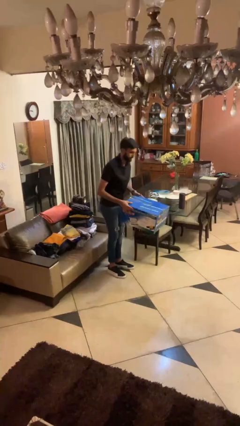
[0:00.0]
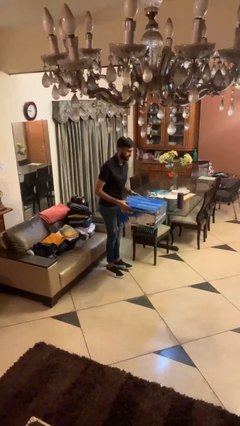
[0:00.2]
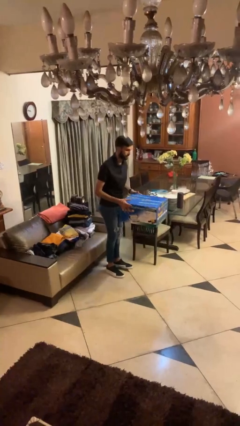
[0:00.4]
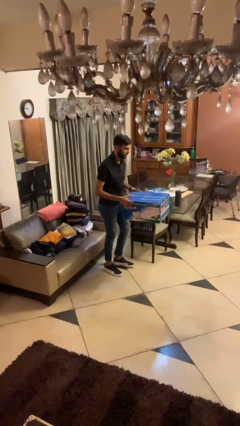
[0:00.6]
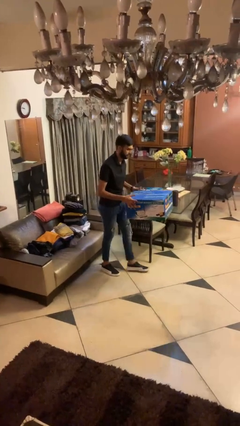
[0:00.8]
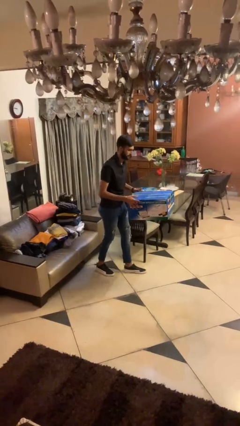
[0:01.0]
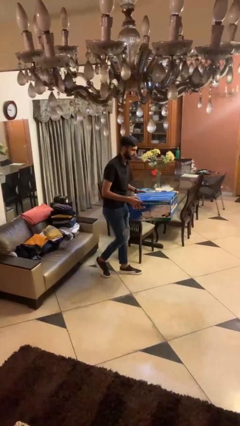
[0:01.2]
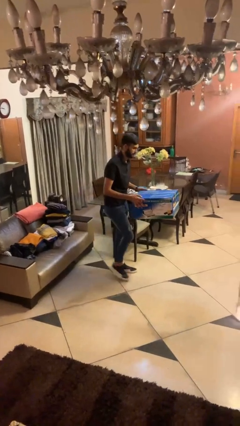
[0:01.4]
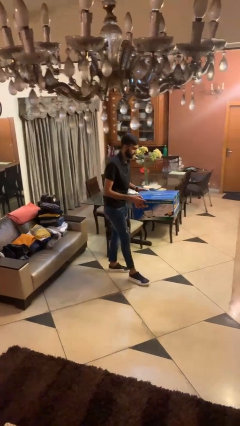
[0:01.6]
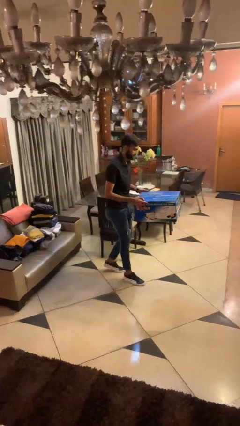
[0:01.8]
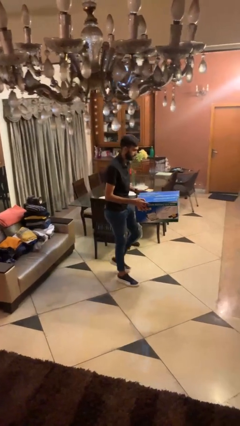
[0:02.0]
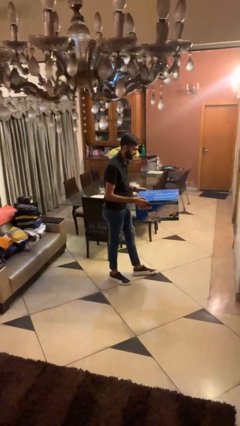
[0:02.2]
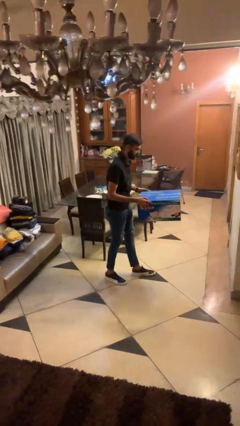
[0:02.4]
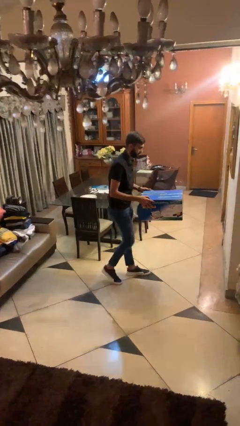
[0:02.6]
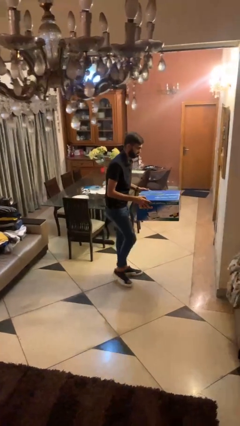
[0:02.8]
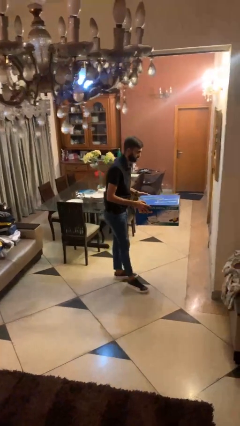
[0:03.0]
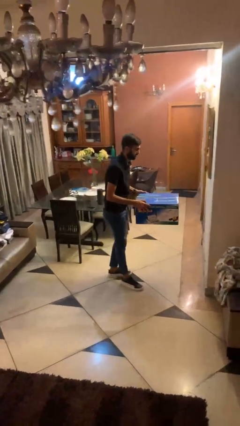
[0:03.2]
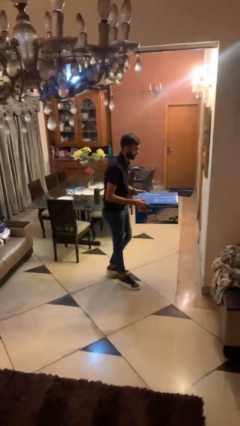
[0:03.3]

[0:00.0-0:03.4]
person carries heavy object

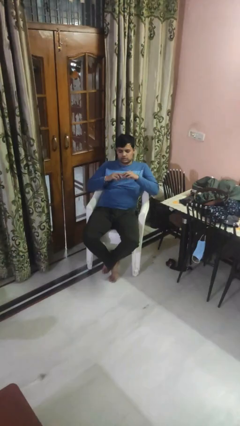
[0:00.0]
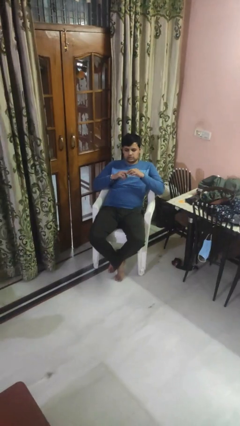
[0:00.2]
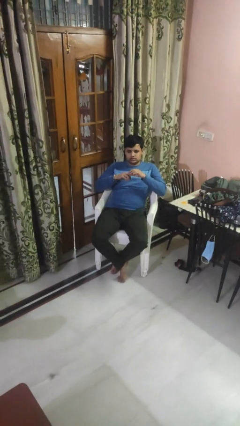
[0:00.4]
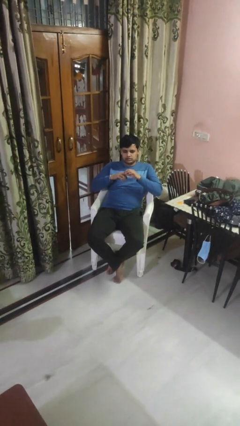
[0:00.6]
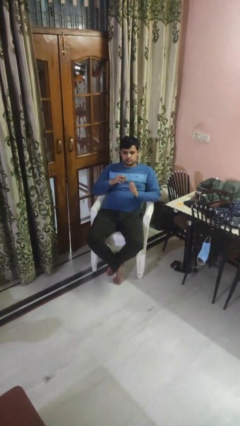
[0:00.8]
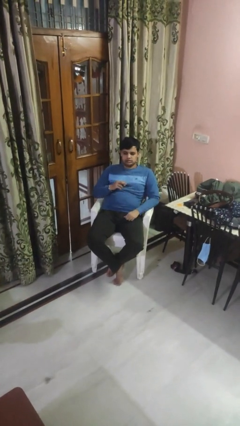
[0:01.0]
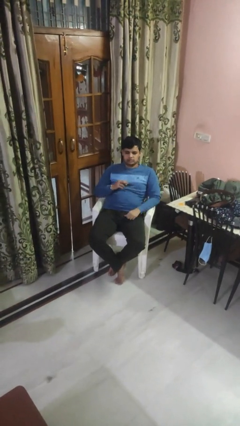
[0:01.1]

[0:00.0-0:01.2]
person puts on ring

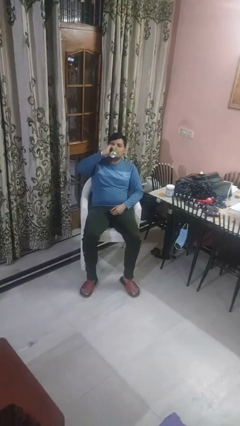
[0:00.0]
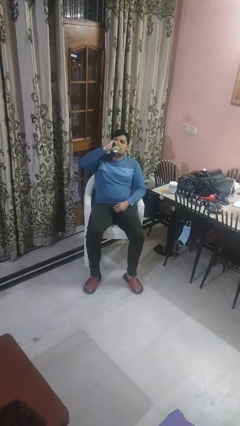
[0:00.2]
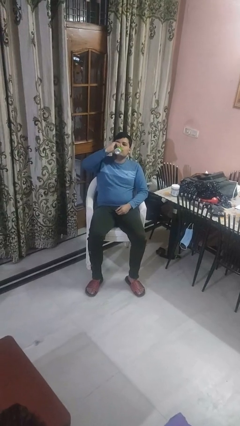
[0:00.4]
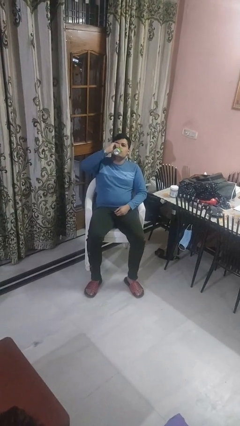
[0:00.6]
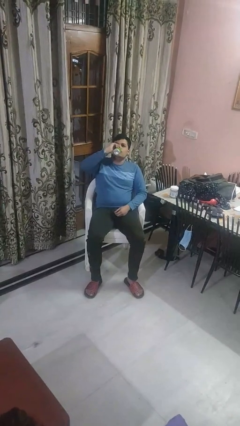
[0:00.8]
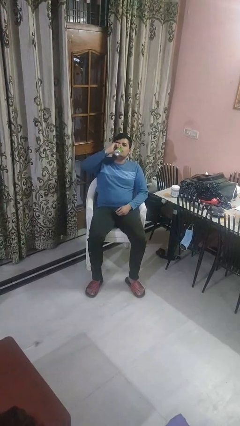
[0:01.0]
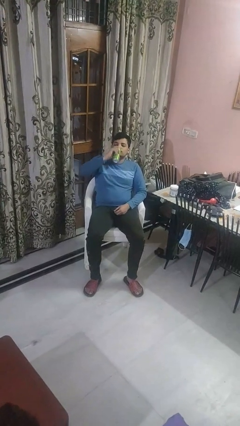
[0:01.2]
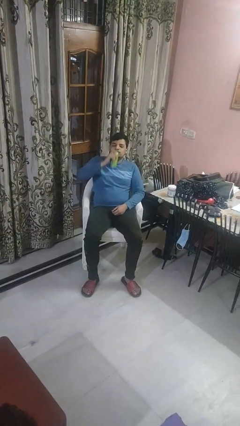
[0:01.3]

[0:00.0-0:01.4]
person drinks from beverage can

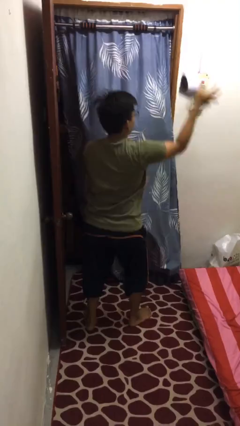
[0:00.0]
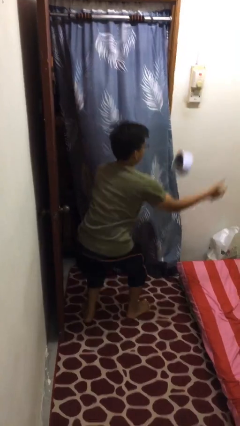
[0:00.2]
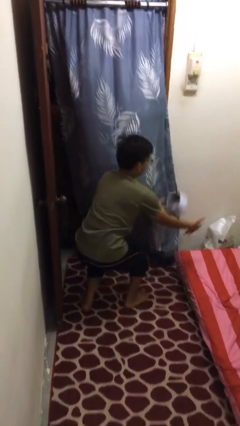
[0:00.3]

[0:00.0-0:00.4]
person drops object

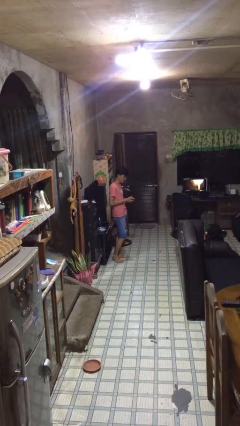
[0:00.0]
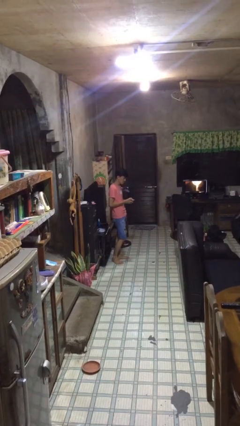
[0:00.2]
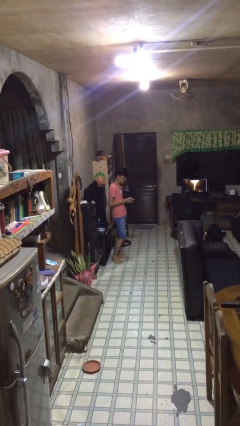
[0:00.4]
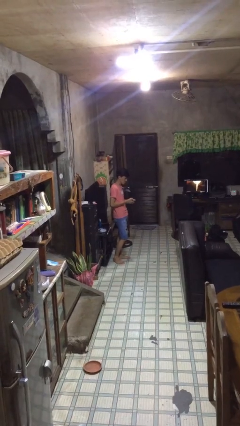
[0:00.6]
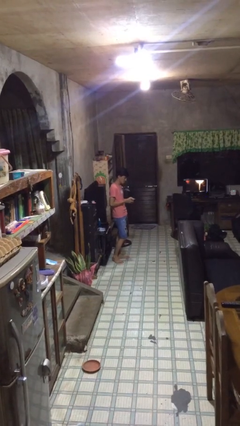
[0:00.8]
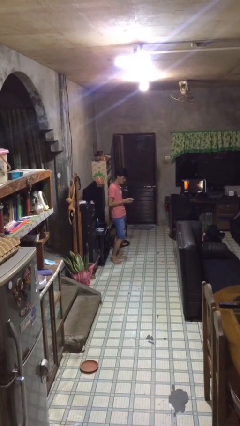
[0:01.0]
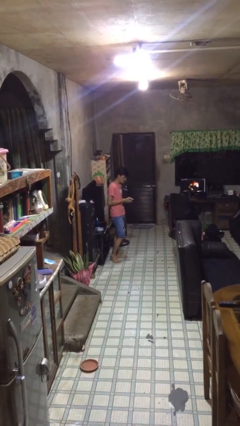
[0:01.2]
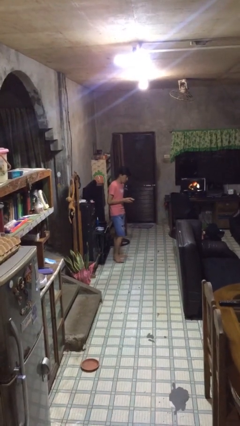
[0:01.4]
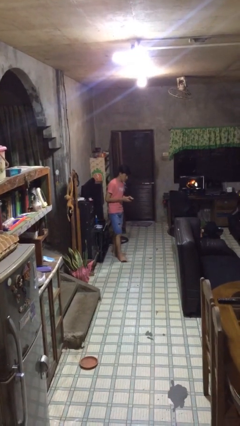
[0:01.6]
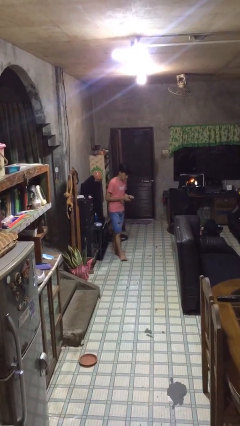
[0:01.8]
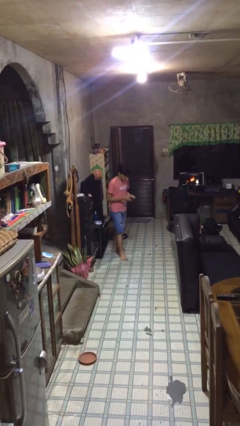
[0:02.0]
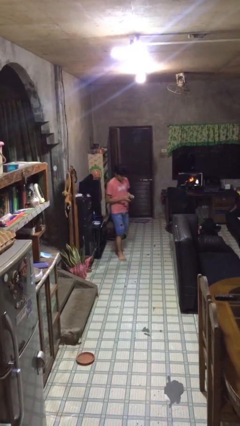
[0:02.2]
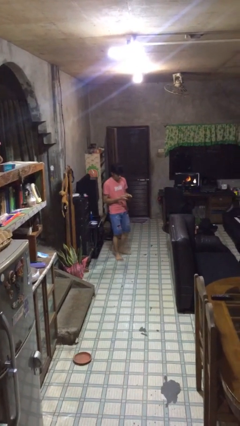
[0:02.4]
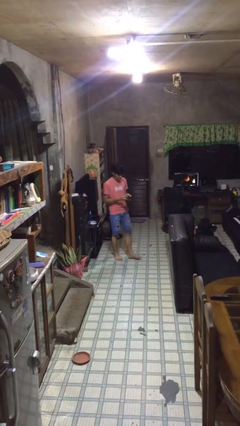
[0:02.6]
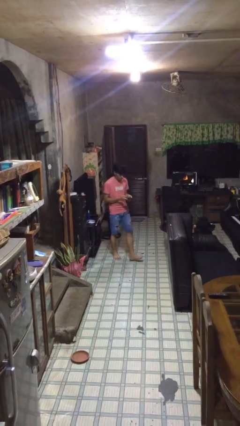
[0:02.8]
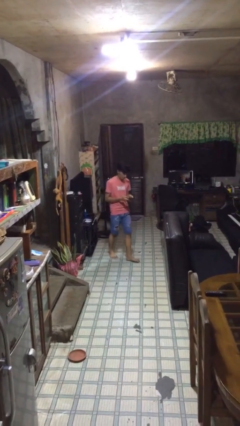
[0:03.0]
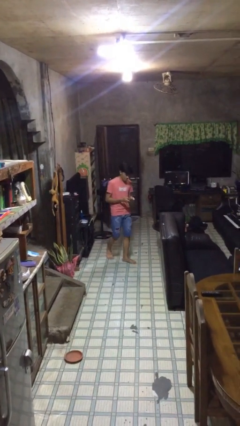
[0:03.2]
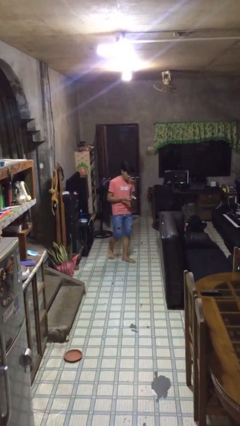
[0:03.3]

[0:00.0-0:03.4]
person texts on phone

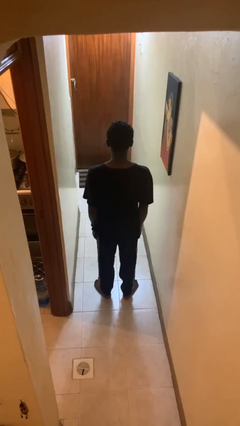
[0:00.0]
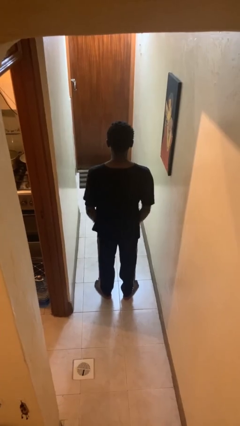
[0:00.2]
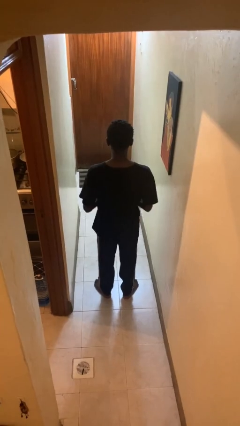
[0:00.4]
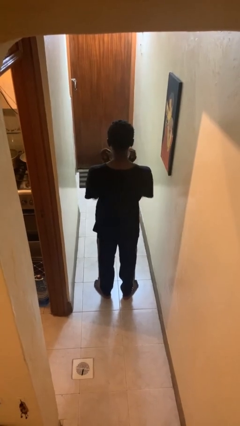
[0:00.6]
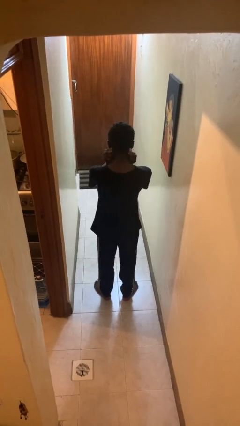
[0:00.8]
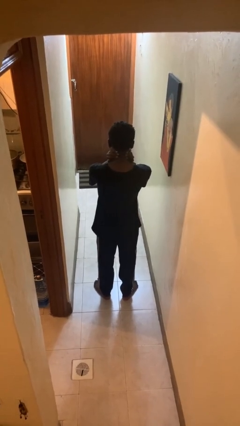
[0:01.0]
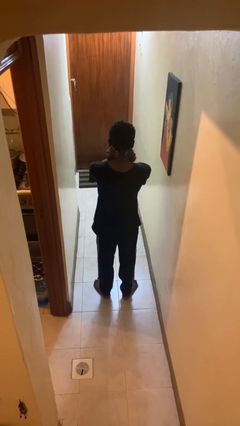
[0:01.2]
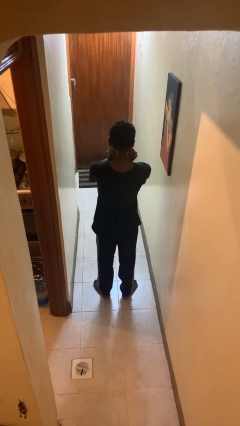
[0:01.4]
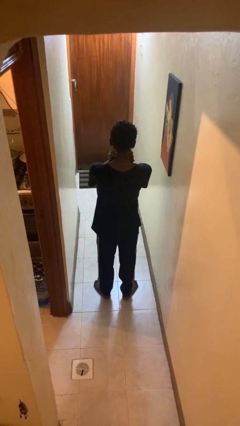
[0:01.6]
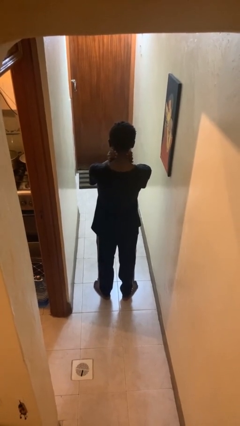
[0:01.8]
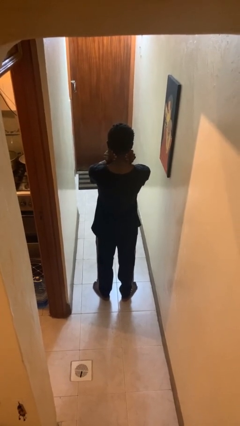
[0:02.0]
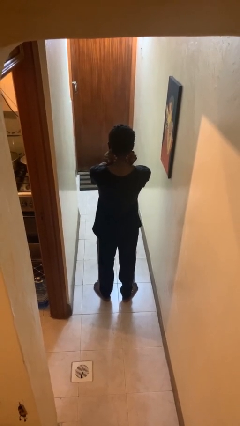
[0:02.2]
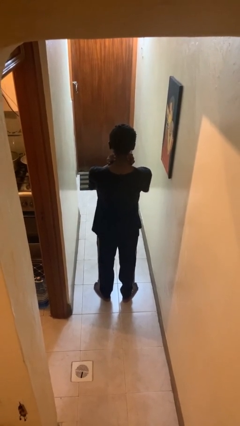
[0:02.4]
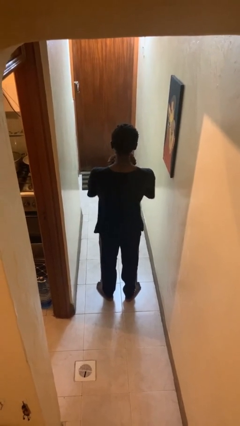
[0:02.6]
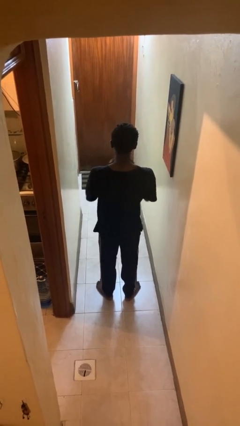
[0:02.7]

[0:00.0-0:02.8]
person rubs neck

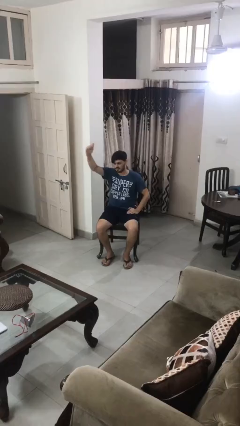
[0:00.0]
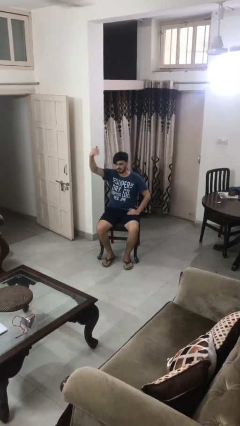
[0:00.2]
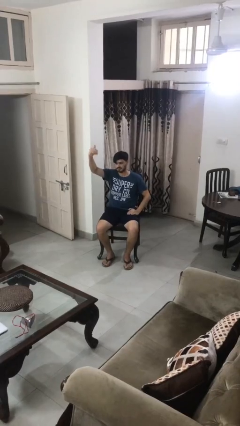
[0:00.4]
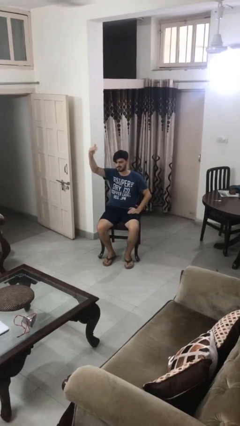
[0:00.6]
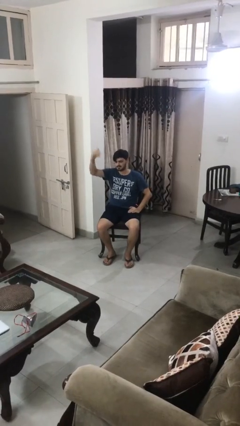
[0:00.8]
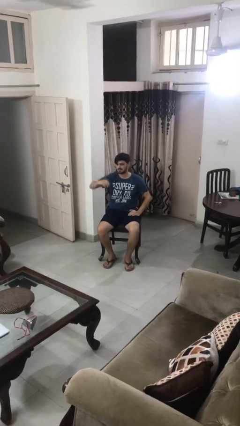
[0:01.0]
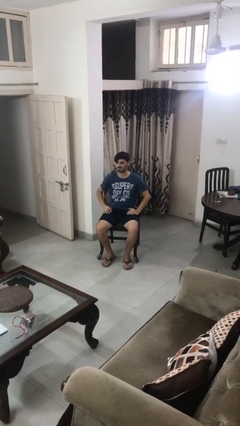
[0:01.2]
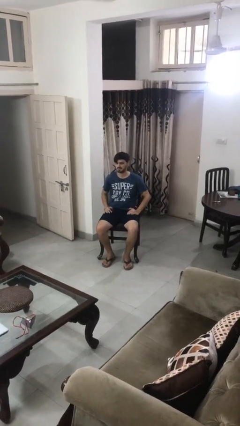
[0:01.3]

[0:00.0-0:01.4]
person gestures come here

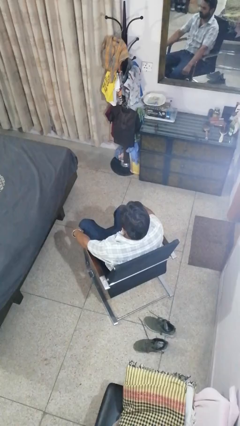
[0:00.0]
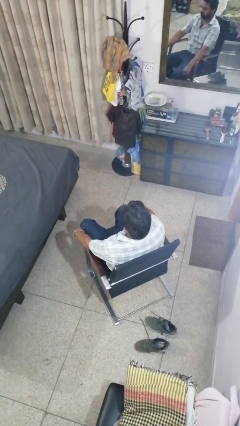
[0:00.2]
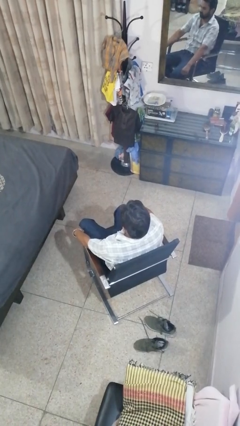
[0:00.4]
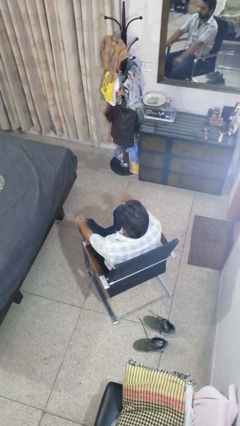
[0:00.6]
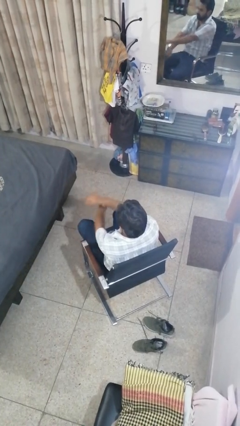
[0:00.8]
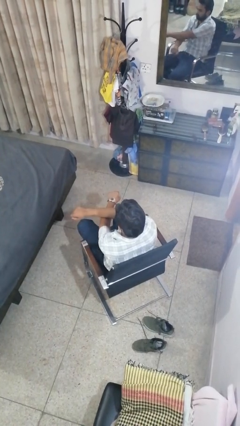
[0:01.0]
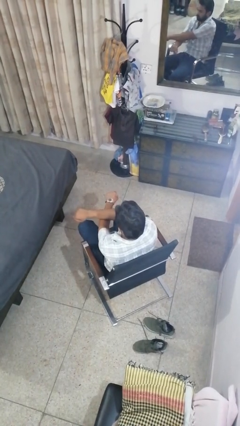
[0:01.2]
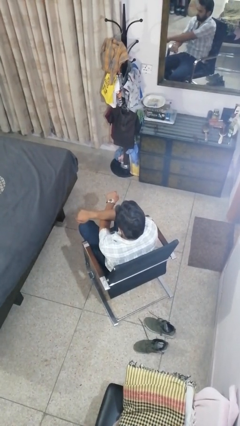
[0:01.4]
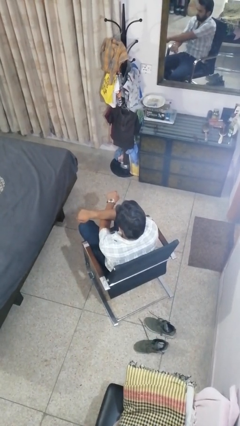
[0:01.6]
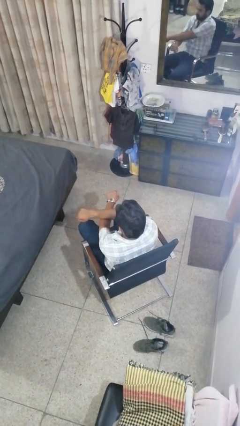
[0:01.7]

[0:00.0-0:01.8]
person gestures arms x

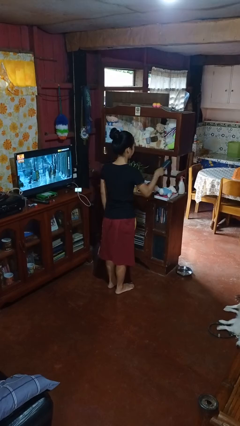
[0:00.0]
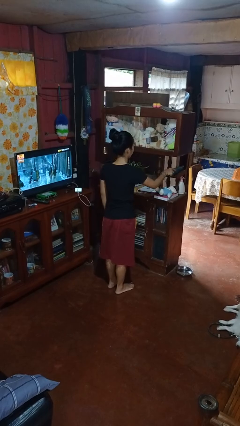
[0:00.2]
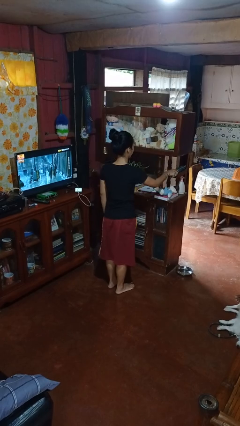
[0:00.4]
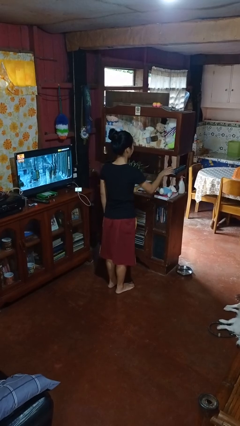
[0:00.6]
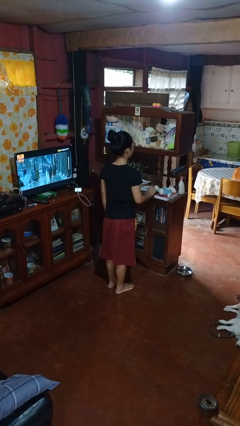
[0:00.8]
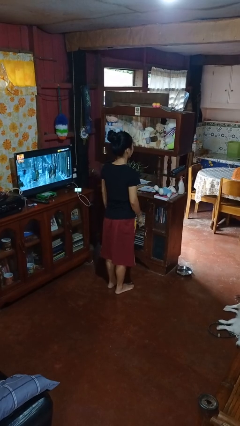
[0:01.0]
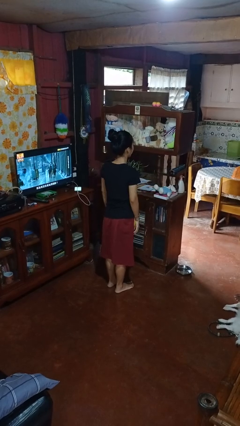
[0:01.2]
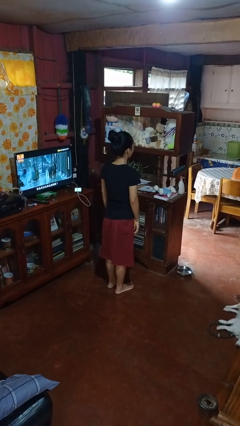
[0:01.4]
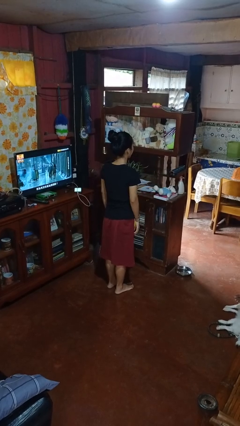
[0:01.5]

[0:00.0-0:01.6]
person puts down object on shelf
